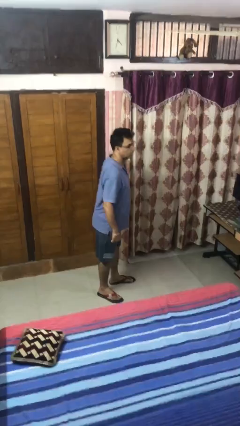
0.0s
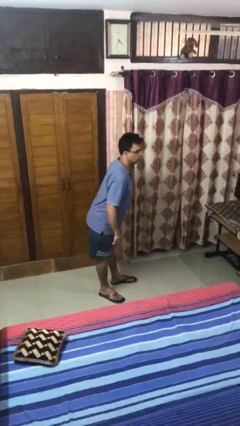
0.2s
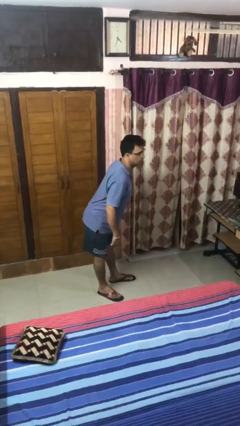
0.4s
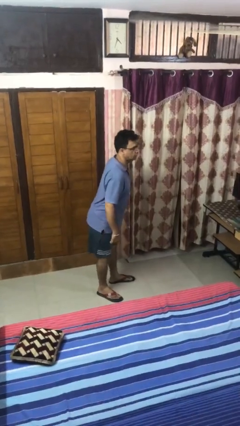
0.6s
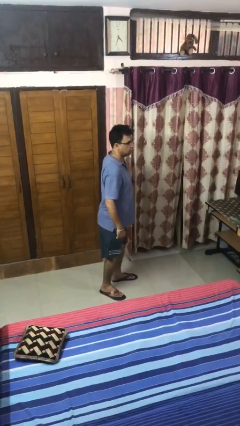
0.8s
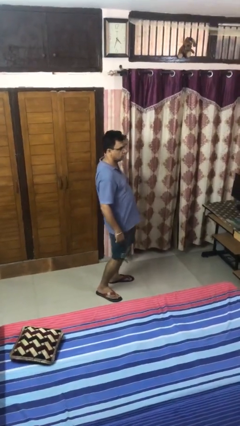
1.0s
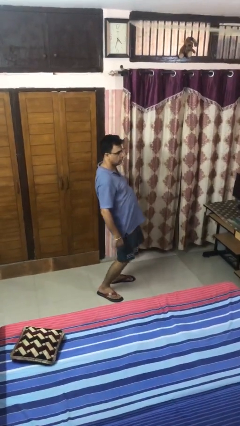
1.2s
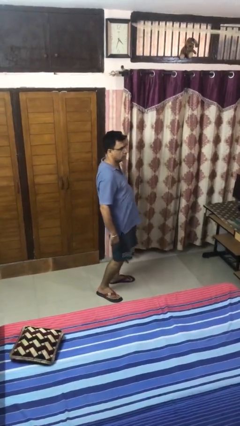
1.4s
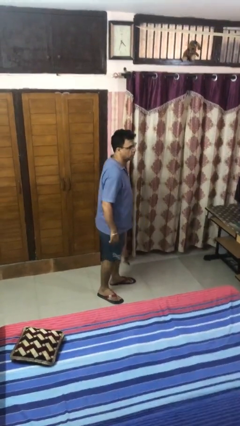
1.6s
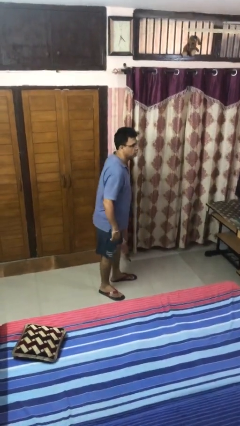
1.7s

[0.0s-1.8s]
person wiggles hips

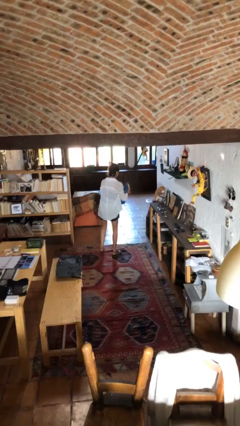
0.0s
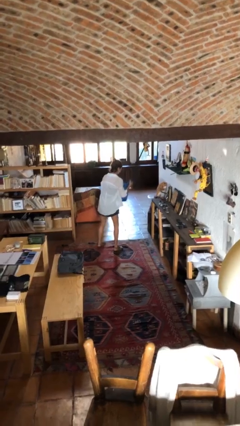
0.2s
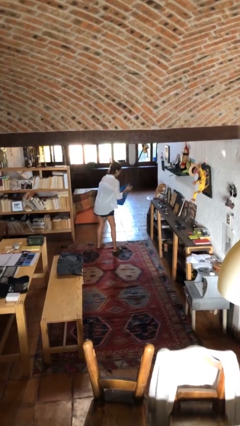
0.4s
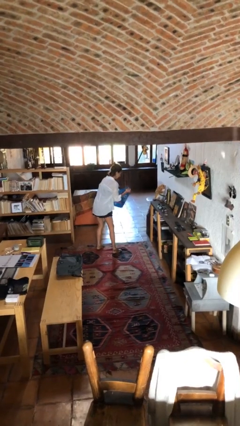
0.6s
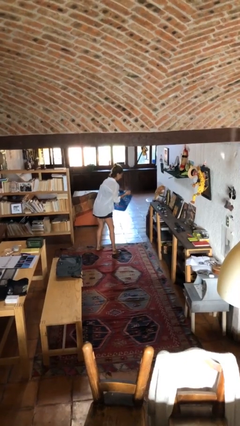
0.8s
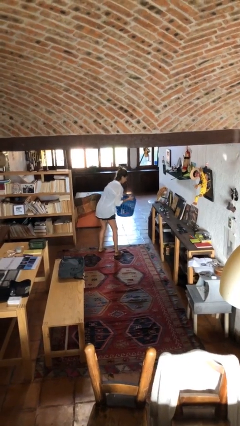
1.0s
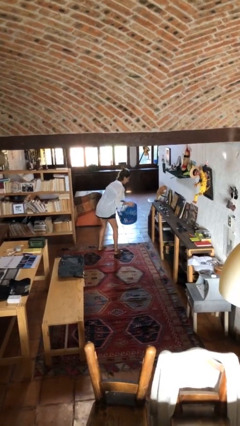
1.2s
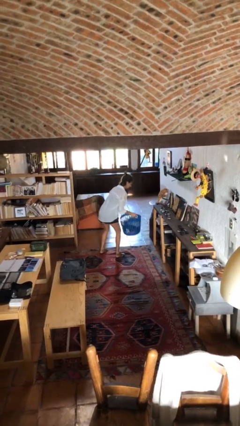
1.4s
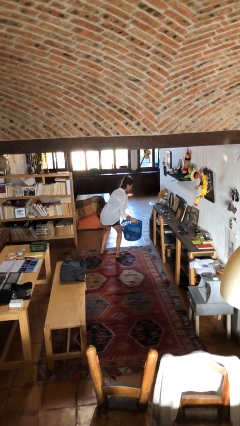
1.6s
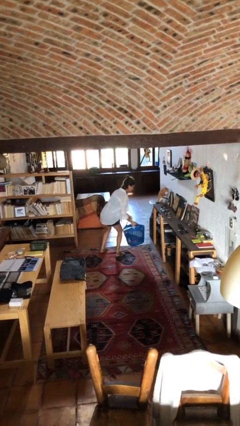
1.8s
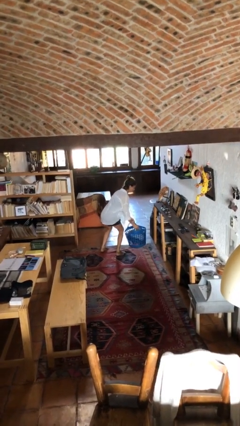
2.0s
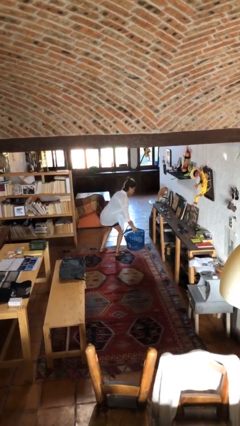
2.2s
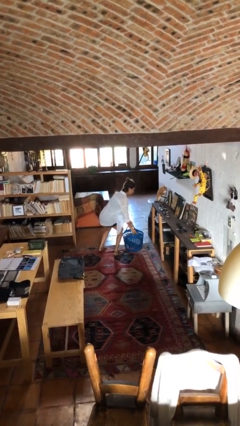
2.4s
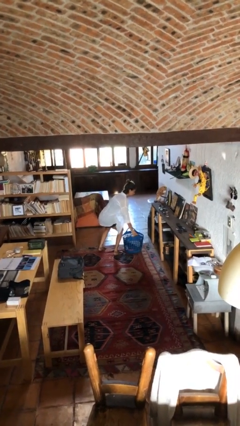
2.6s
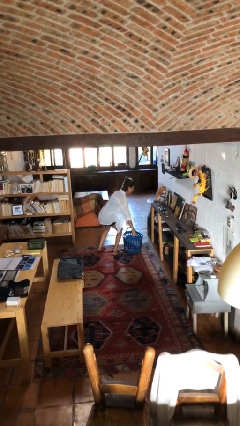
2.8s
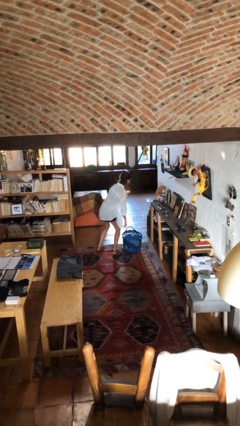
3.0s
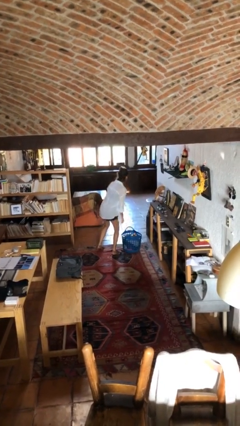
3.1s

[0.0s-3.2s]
person puts down object on floor

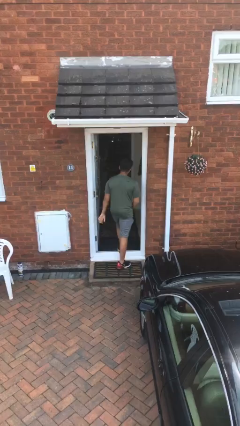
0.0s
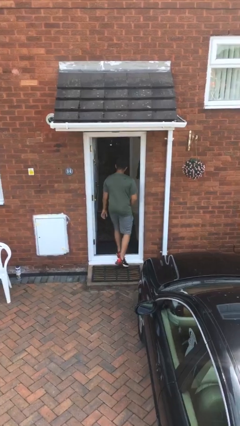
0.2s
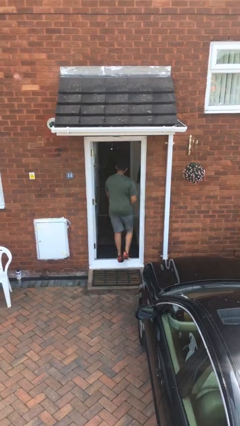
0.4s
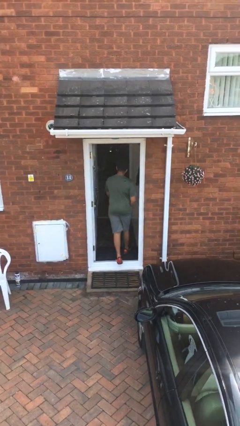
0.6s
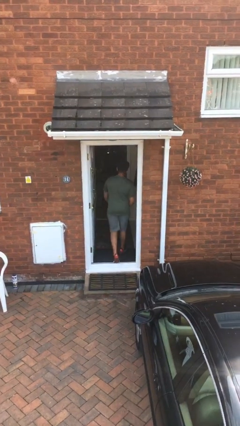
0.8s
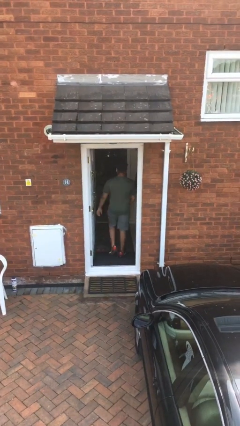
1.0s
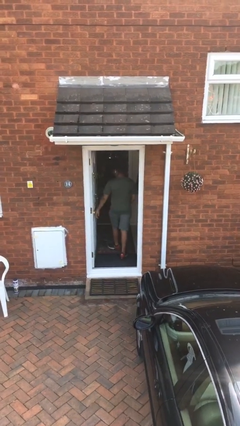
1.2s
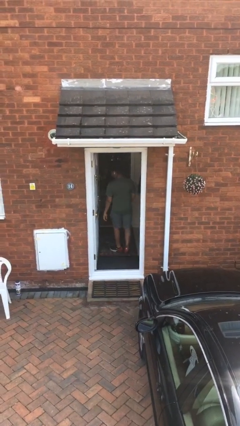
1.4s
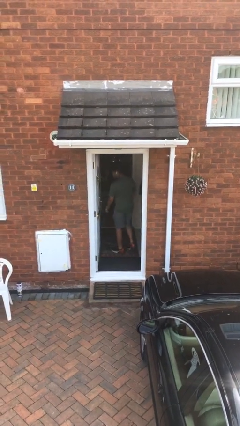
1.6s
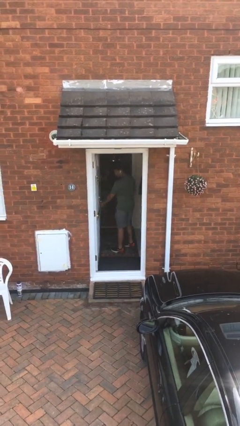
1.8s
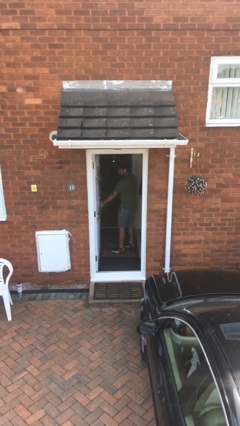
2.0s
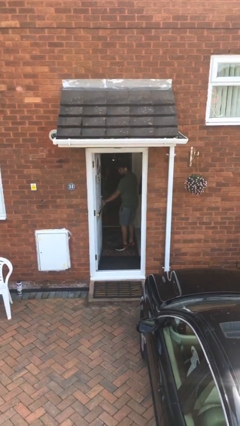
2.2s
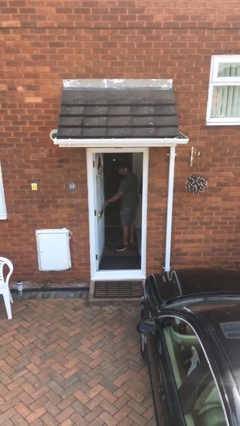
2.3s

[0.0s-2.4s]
person exits scene through structure

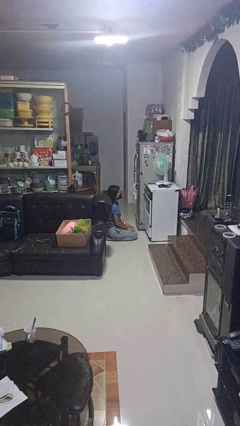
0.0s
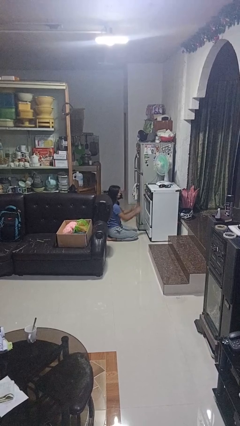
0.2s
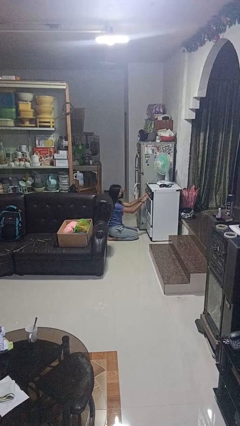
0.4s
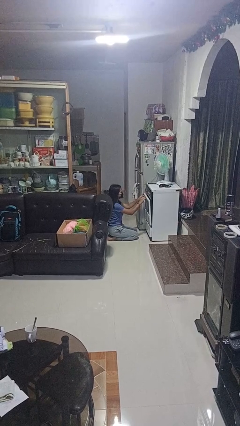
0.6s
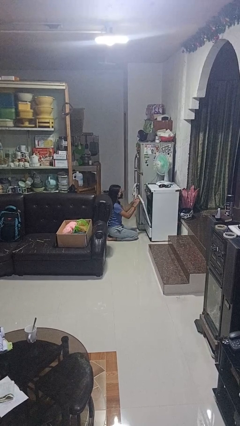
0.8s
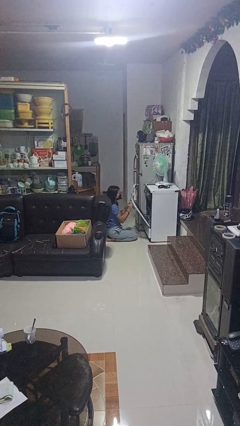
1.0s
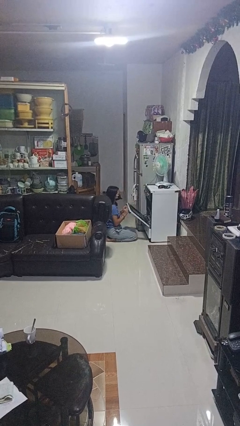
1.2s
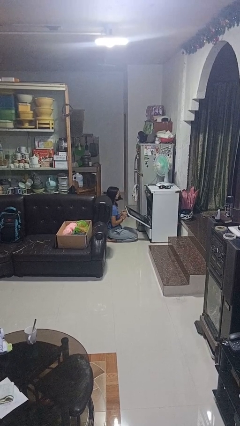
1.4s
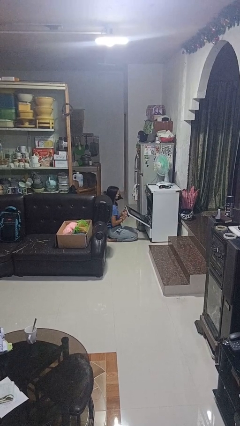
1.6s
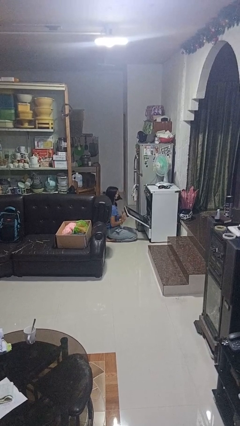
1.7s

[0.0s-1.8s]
person opens oven door

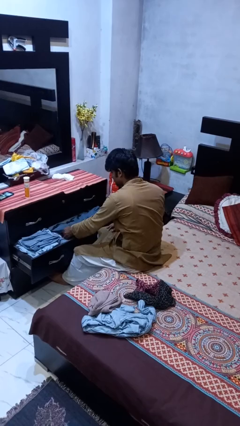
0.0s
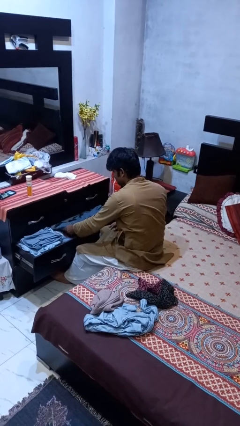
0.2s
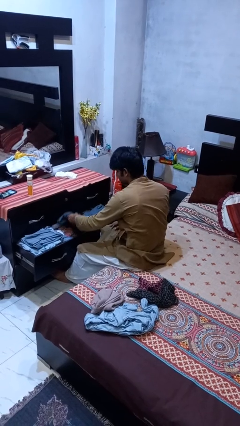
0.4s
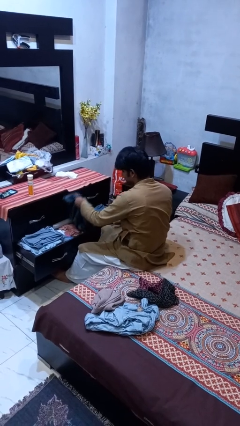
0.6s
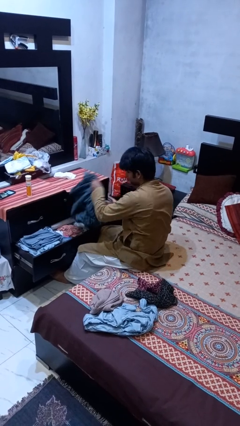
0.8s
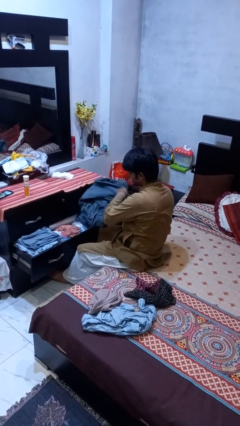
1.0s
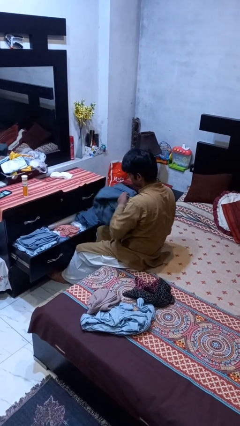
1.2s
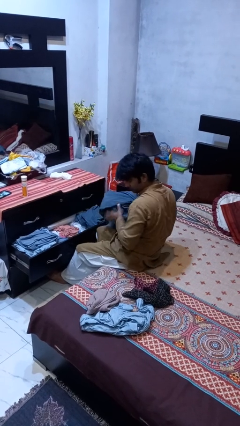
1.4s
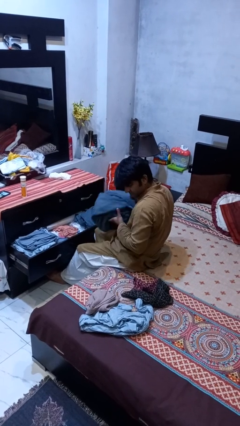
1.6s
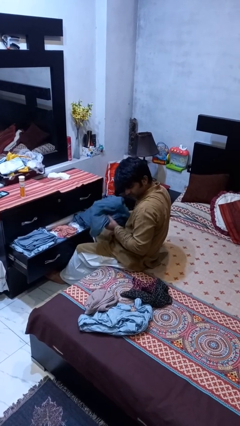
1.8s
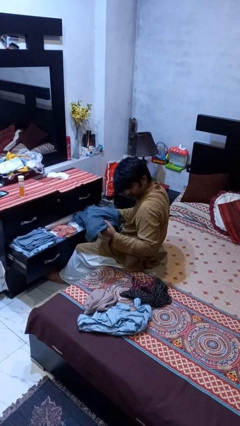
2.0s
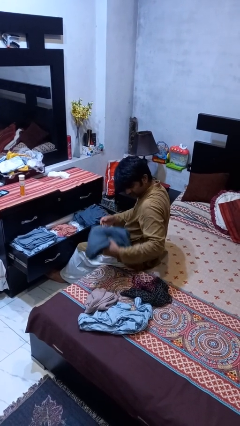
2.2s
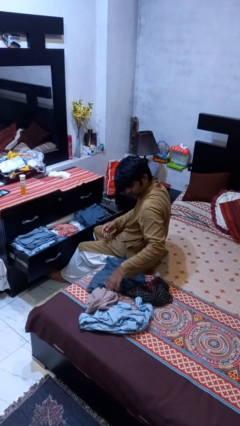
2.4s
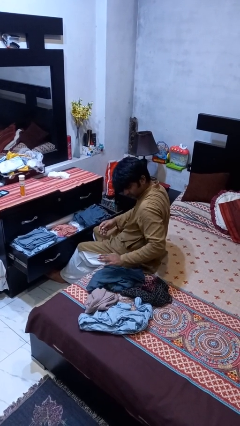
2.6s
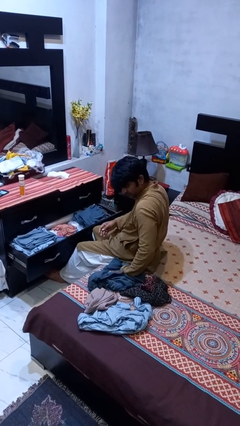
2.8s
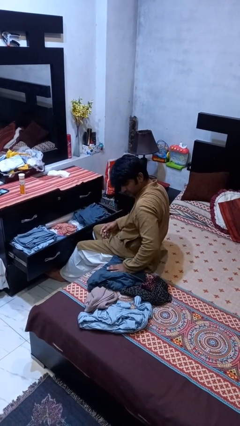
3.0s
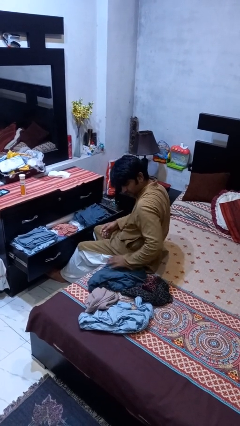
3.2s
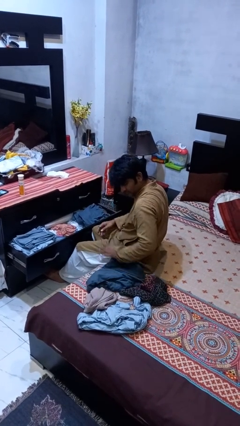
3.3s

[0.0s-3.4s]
person takes clothes from dresser

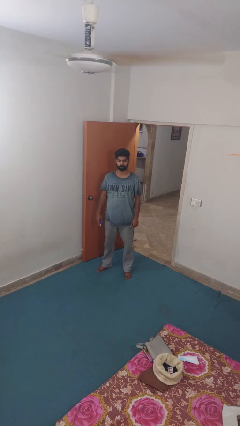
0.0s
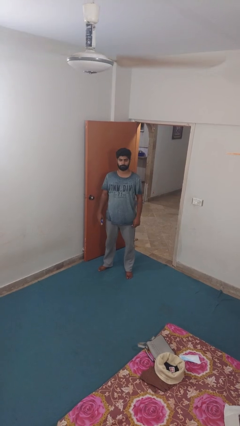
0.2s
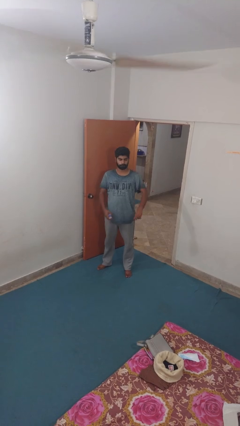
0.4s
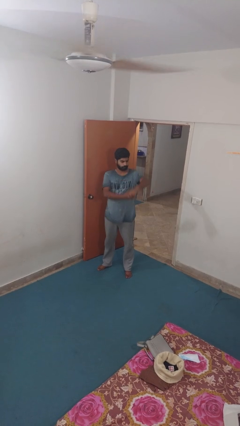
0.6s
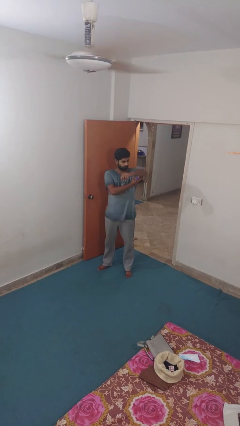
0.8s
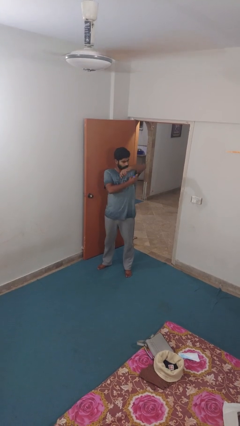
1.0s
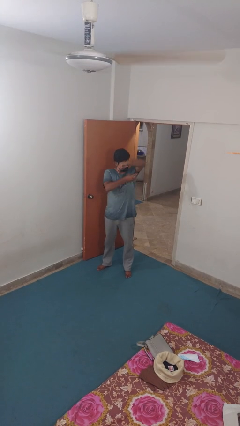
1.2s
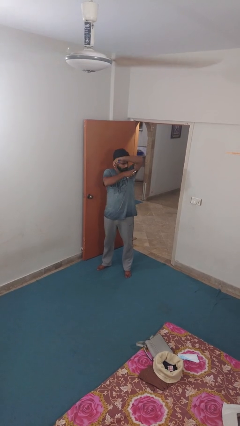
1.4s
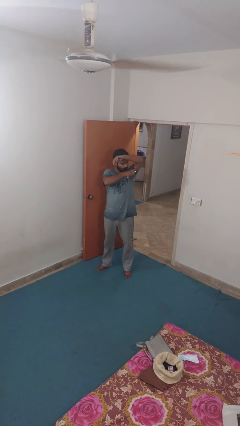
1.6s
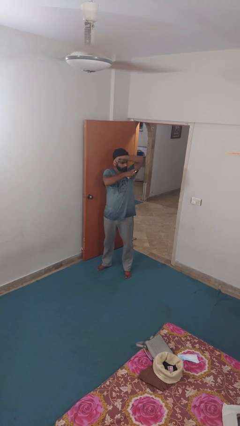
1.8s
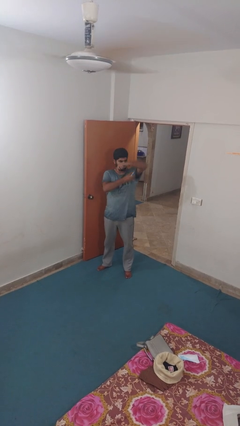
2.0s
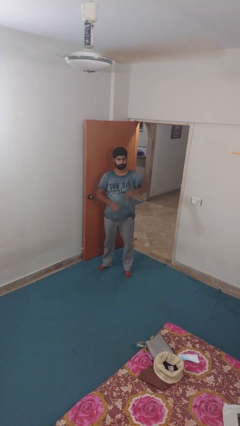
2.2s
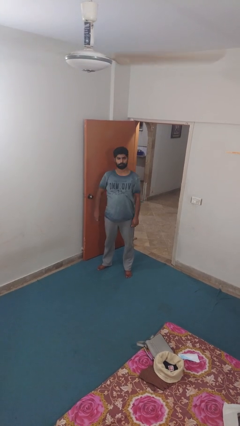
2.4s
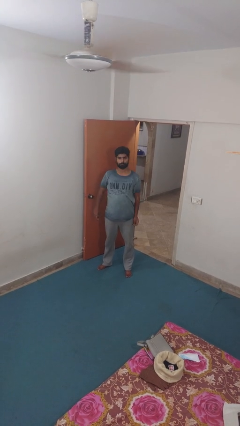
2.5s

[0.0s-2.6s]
person applies deodorant

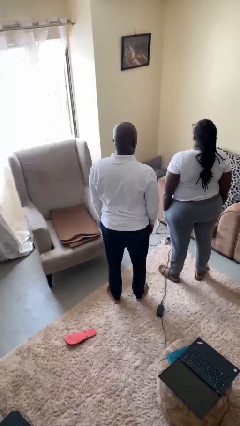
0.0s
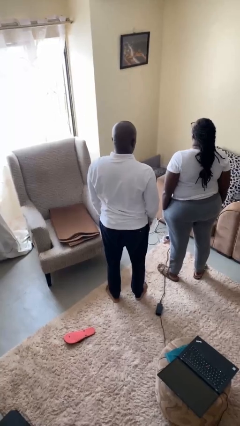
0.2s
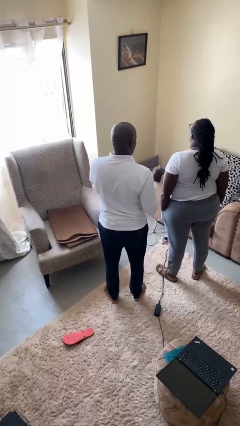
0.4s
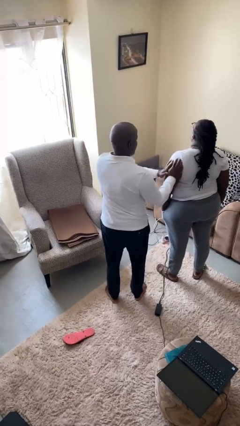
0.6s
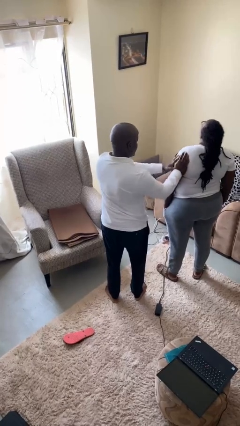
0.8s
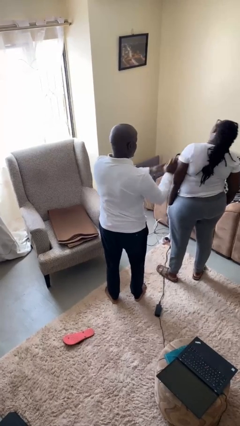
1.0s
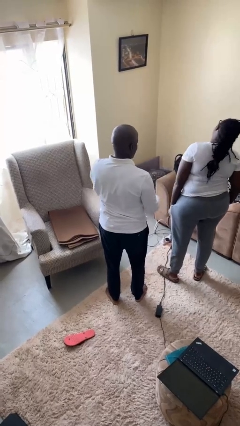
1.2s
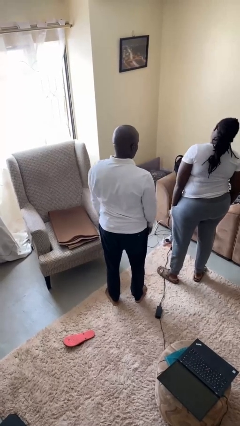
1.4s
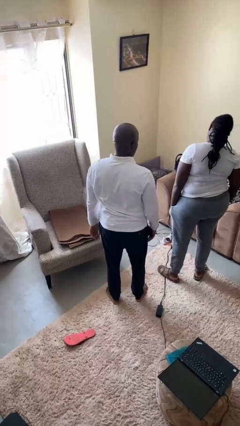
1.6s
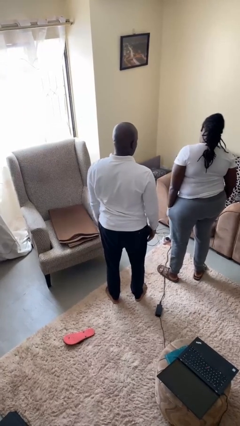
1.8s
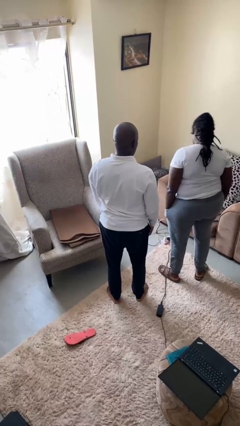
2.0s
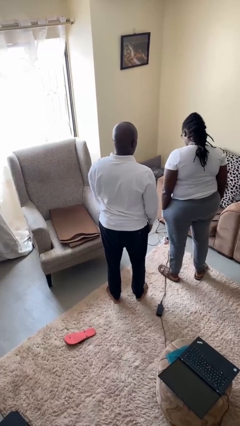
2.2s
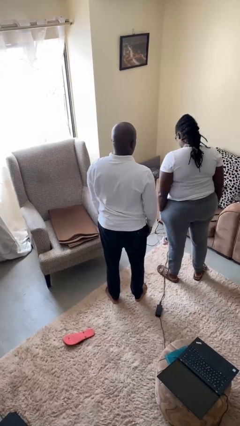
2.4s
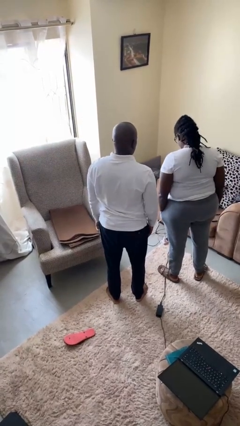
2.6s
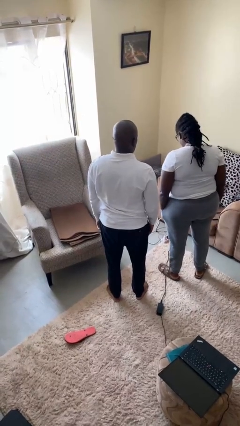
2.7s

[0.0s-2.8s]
person shoves person
